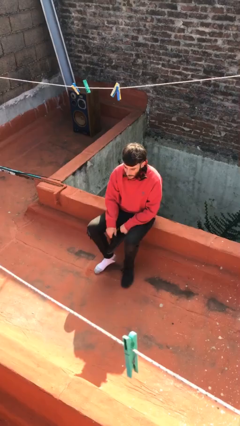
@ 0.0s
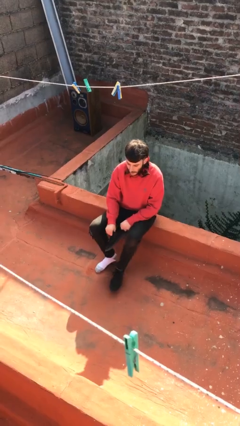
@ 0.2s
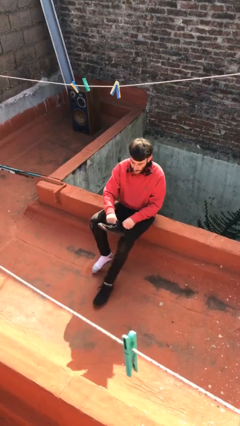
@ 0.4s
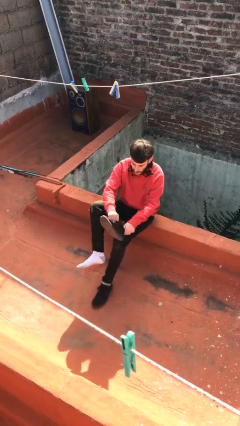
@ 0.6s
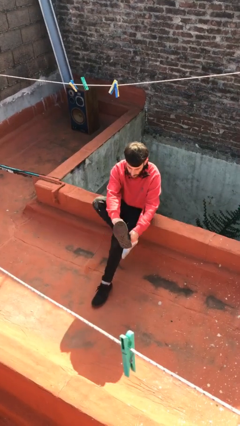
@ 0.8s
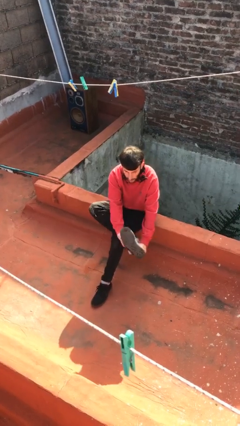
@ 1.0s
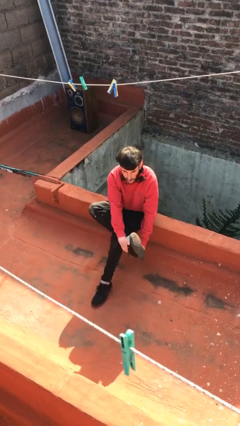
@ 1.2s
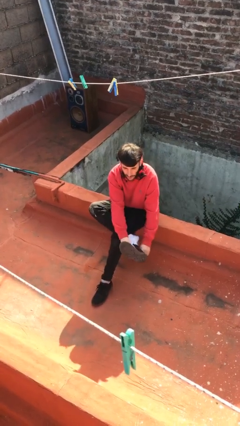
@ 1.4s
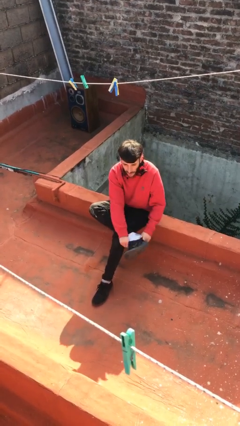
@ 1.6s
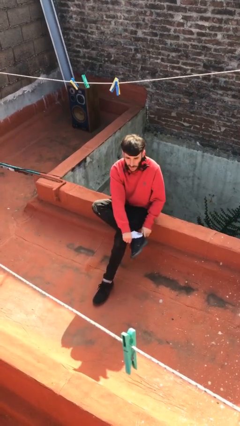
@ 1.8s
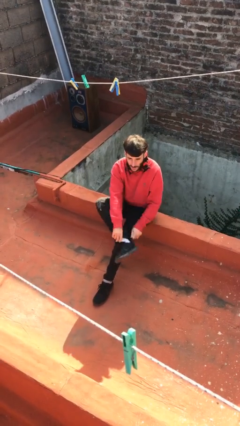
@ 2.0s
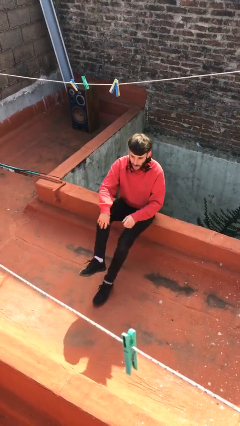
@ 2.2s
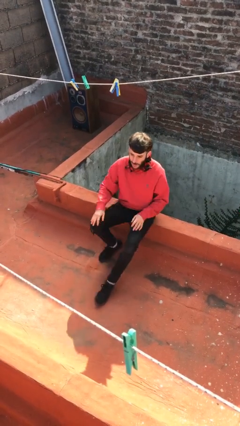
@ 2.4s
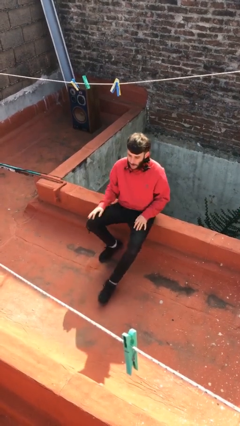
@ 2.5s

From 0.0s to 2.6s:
person puts on shoes

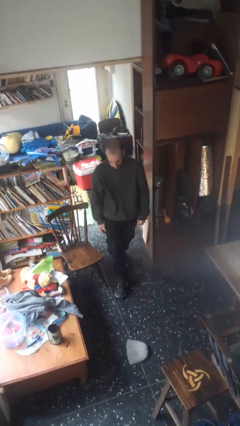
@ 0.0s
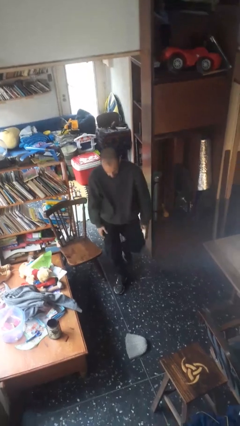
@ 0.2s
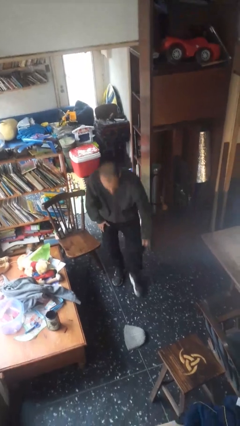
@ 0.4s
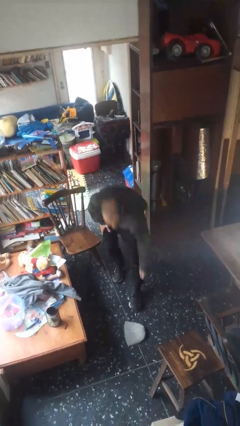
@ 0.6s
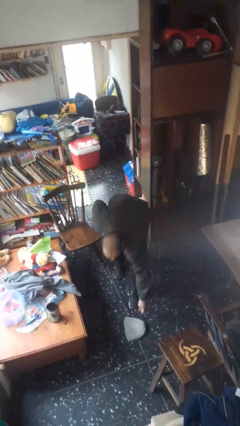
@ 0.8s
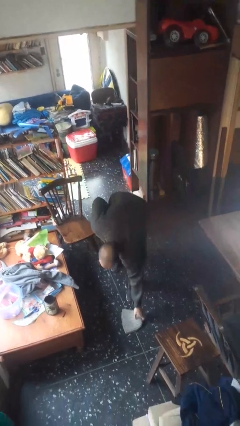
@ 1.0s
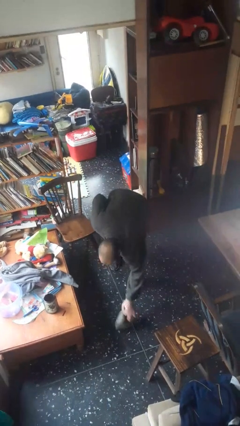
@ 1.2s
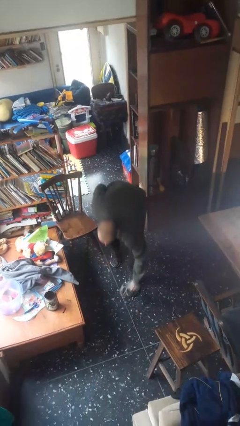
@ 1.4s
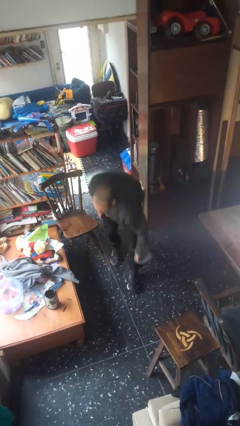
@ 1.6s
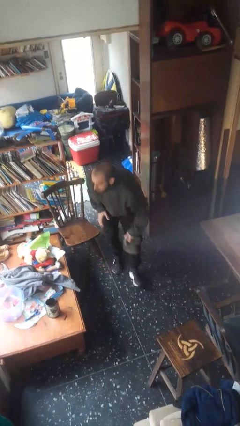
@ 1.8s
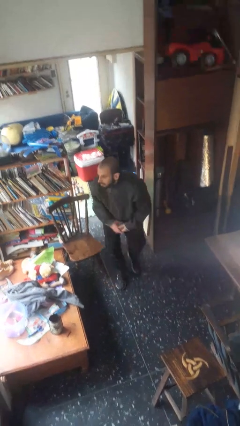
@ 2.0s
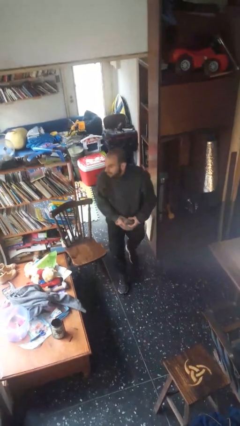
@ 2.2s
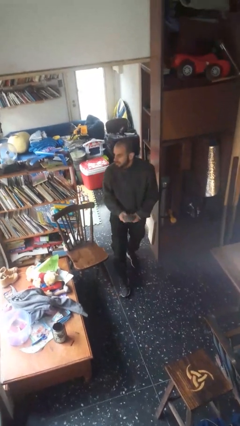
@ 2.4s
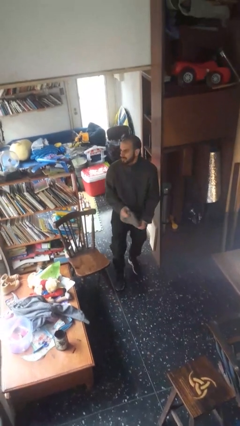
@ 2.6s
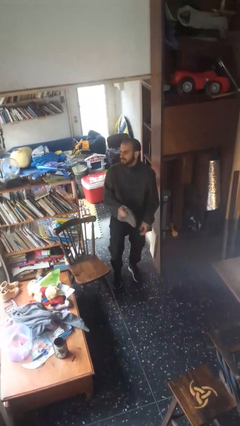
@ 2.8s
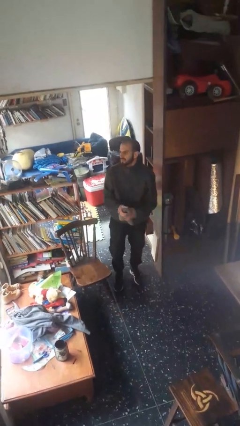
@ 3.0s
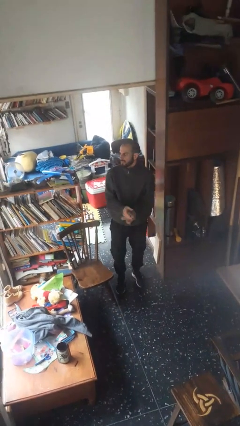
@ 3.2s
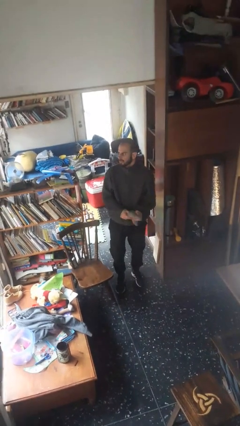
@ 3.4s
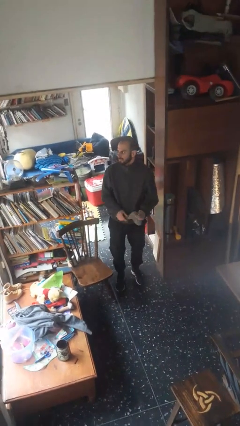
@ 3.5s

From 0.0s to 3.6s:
person picks up object from floor

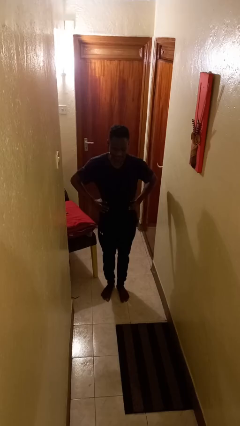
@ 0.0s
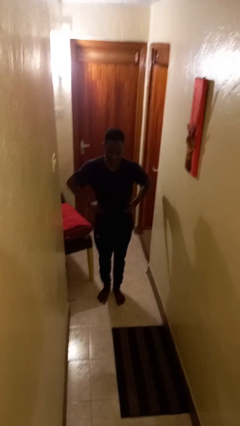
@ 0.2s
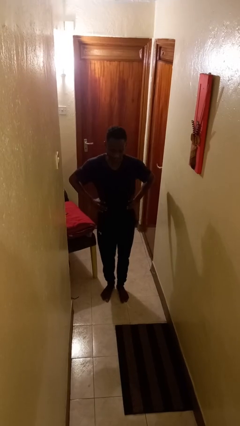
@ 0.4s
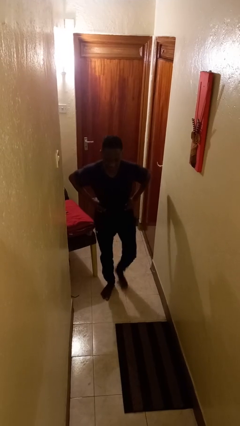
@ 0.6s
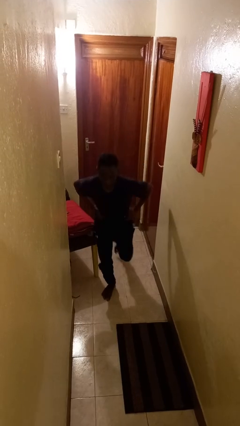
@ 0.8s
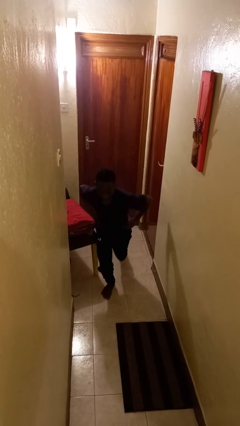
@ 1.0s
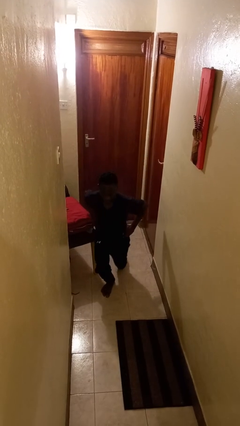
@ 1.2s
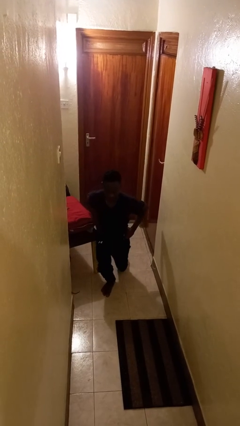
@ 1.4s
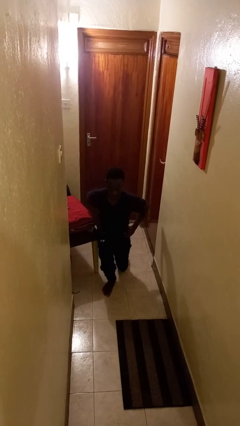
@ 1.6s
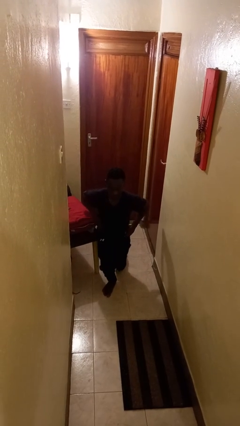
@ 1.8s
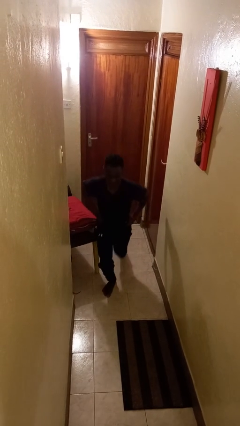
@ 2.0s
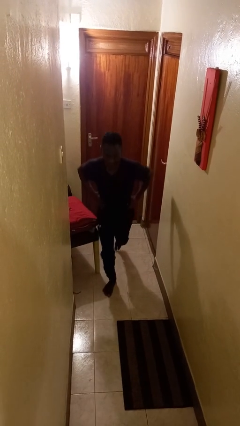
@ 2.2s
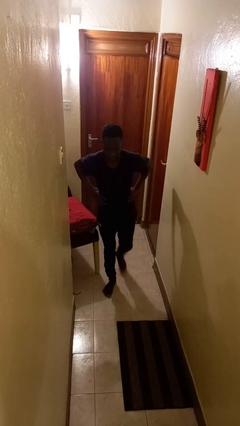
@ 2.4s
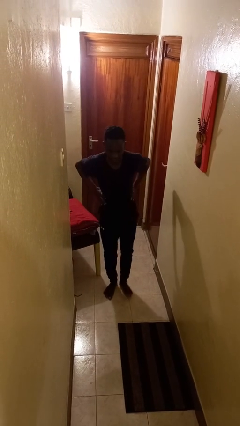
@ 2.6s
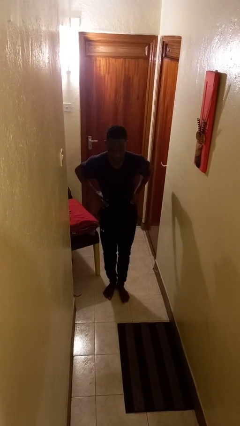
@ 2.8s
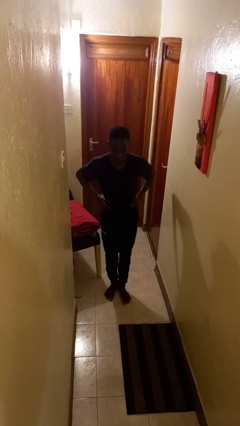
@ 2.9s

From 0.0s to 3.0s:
person exercises with lunges

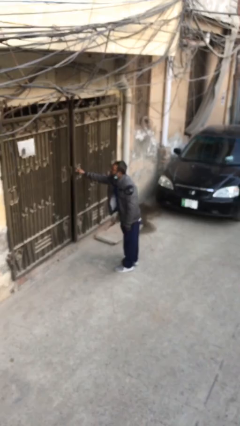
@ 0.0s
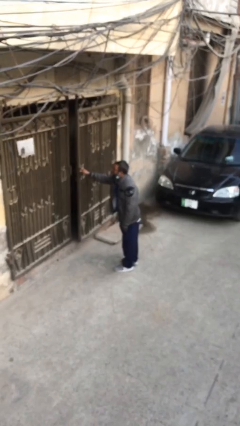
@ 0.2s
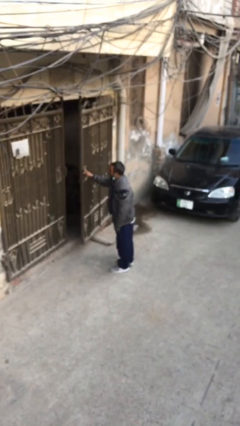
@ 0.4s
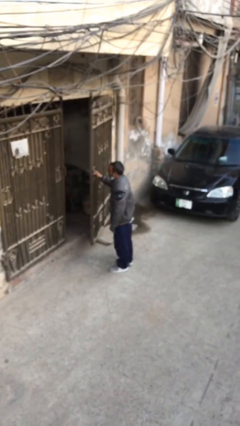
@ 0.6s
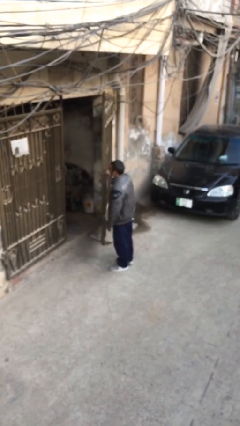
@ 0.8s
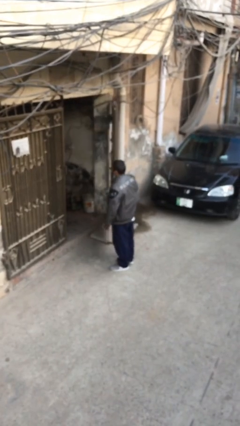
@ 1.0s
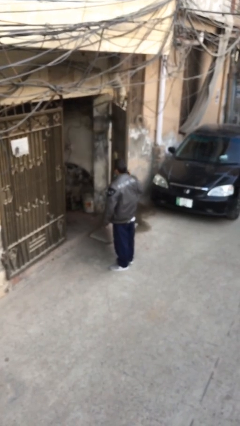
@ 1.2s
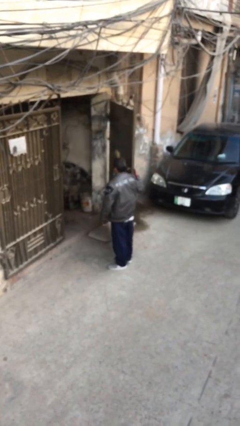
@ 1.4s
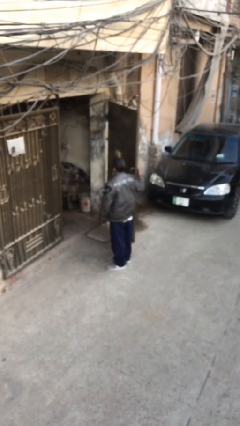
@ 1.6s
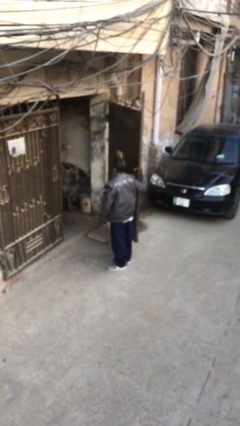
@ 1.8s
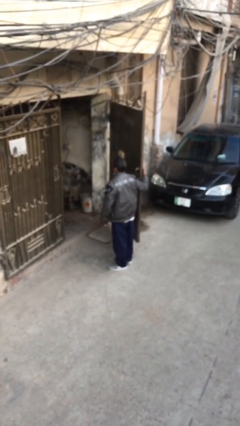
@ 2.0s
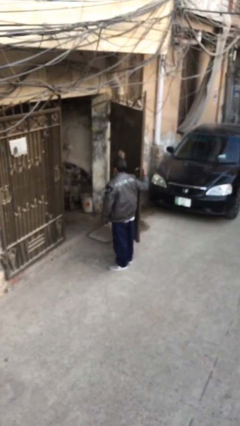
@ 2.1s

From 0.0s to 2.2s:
person opens facility door

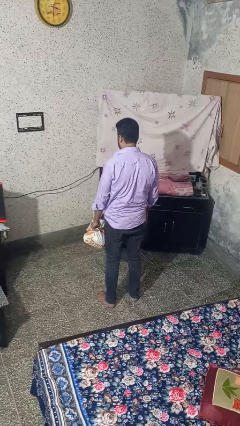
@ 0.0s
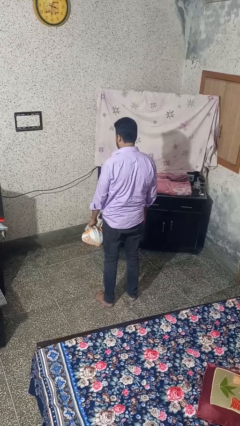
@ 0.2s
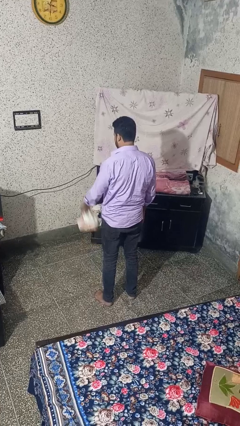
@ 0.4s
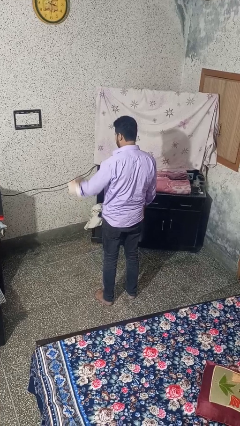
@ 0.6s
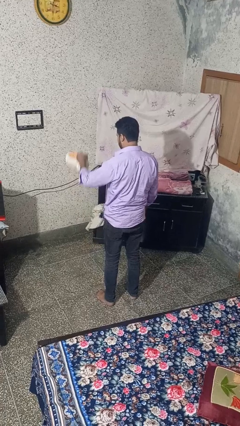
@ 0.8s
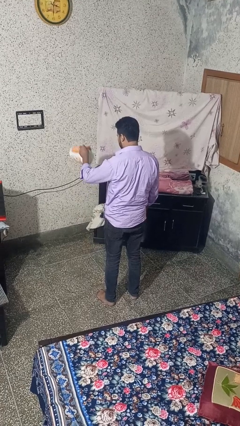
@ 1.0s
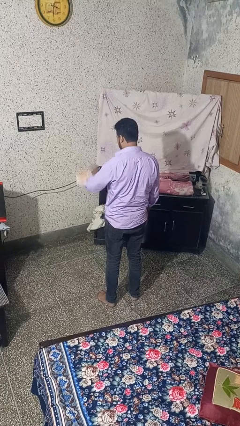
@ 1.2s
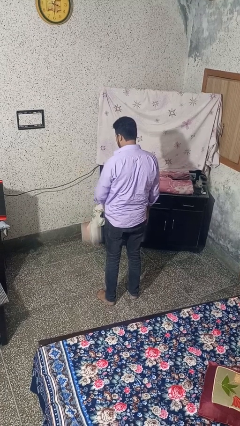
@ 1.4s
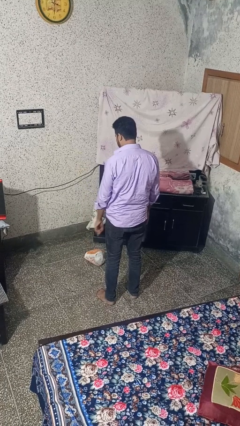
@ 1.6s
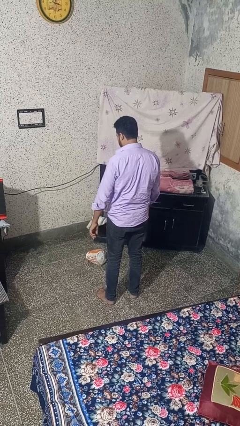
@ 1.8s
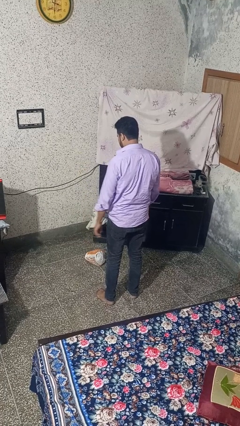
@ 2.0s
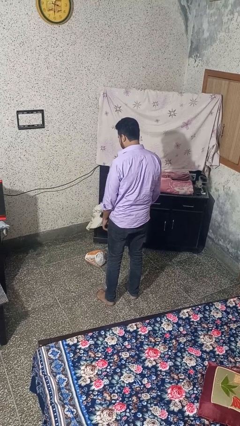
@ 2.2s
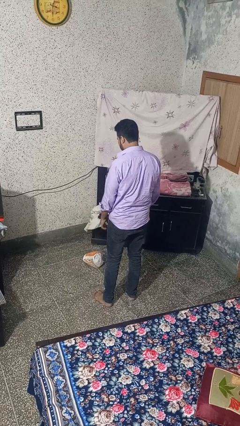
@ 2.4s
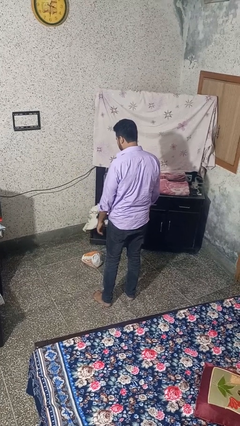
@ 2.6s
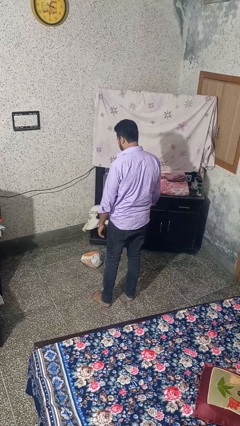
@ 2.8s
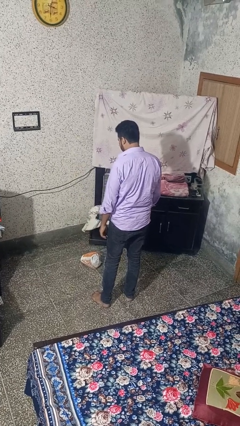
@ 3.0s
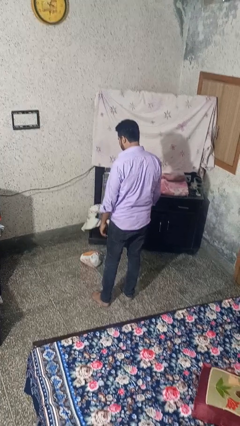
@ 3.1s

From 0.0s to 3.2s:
person throws object to ground

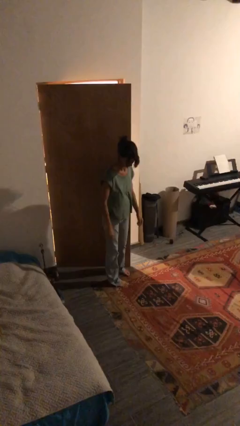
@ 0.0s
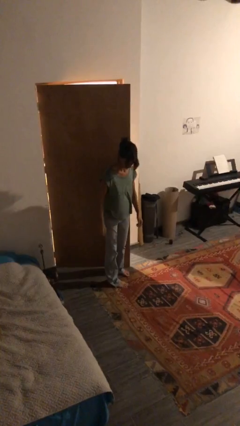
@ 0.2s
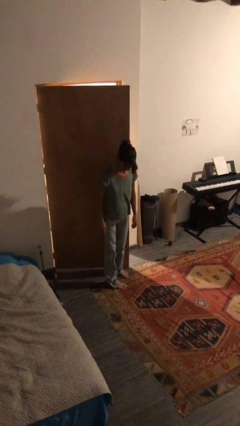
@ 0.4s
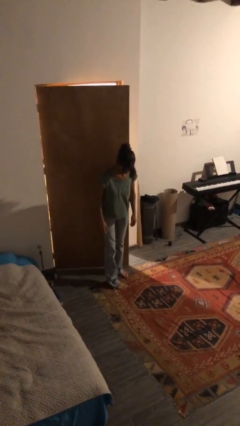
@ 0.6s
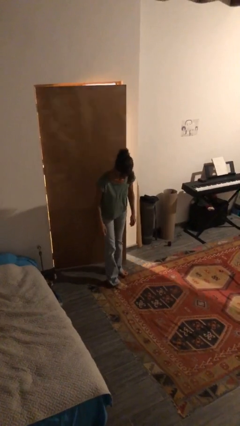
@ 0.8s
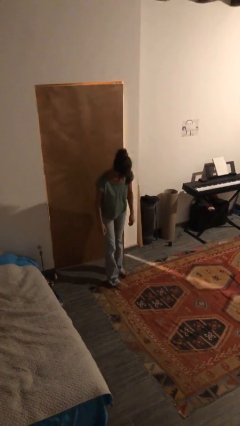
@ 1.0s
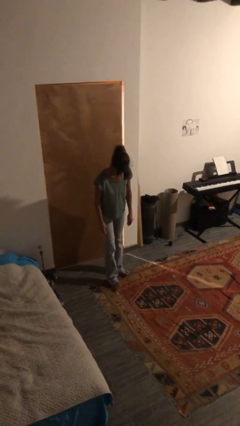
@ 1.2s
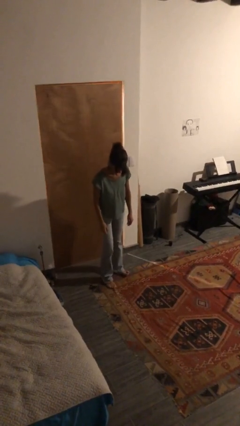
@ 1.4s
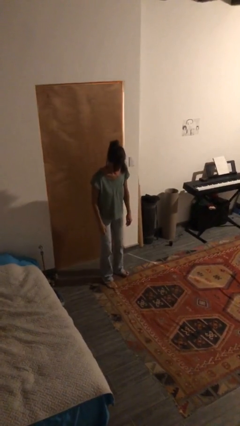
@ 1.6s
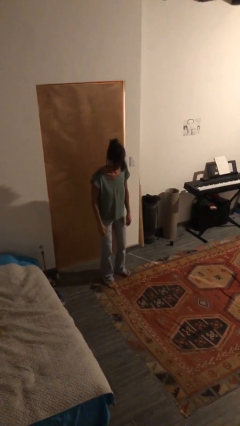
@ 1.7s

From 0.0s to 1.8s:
person closes door with hip

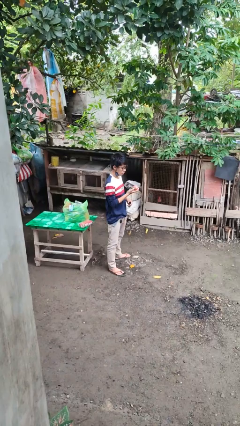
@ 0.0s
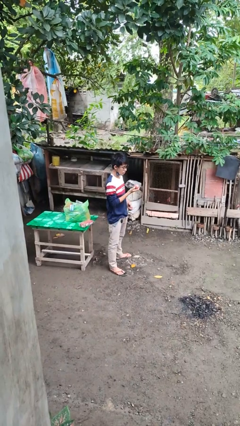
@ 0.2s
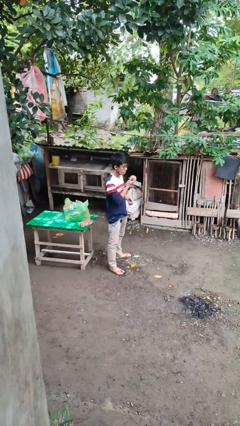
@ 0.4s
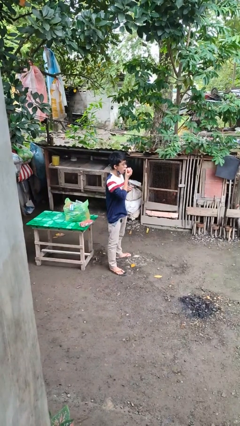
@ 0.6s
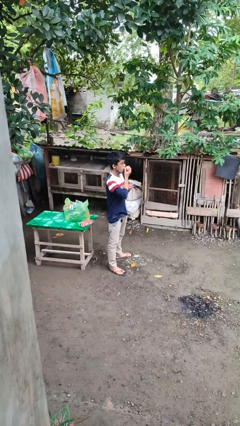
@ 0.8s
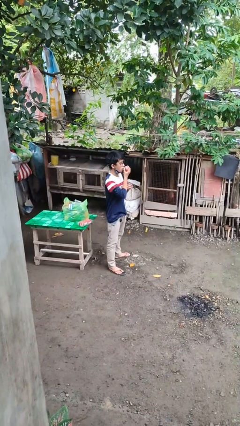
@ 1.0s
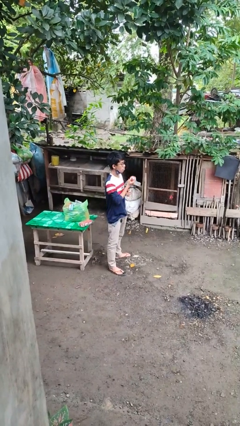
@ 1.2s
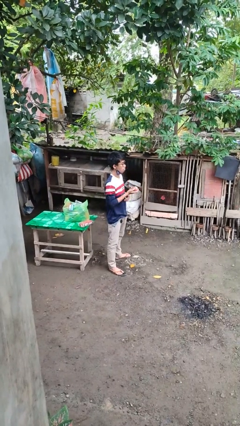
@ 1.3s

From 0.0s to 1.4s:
person eats apple
